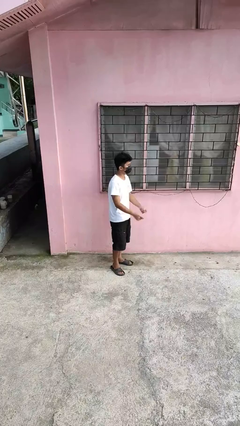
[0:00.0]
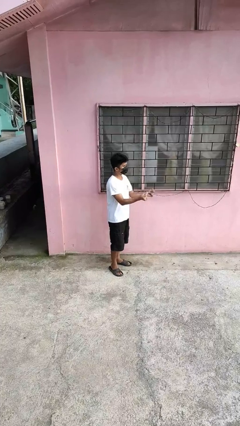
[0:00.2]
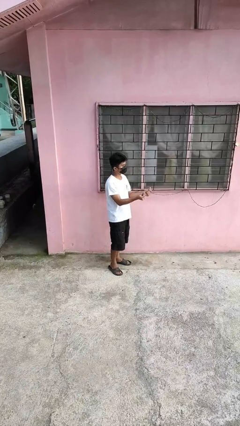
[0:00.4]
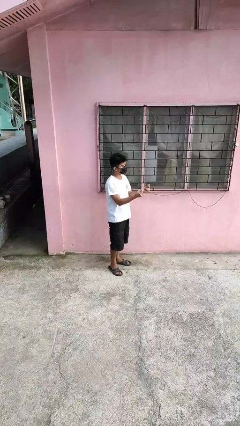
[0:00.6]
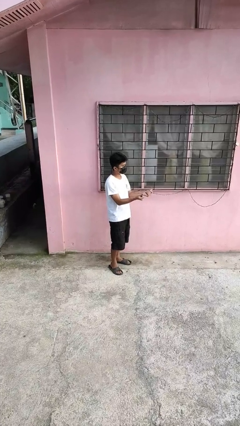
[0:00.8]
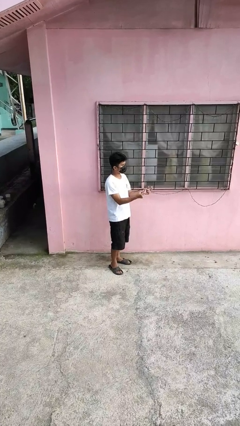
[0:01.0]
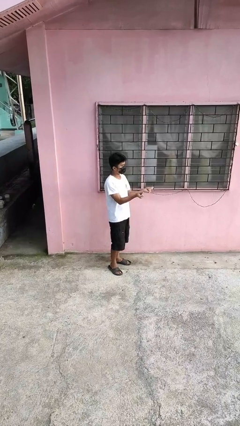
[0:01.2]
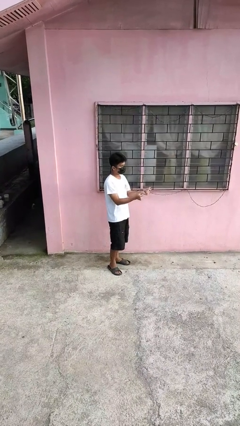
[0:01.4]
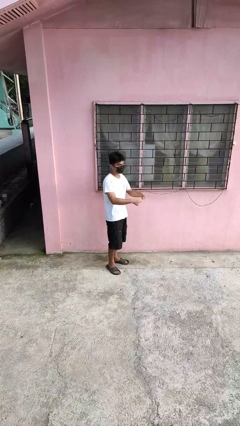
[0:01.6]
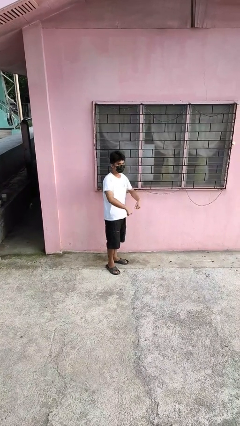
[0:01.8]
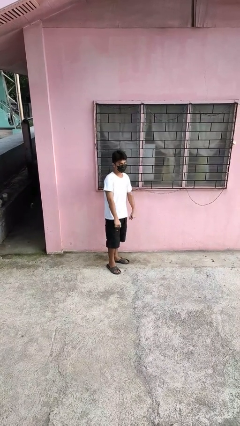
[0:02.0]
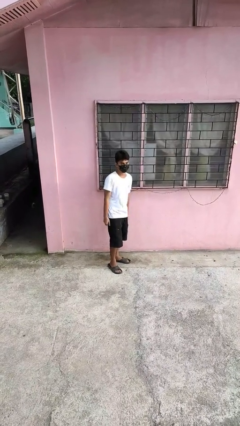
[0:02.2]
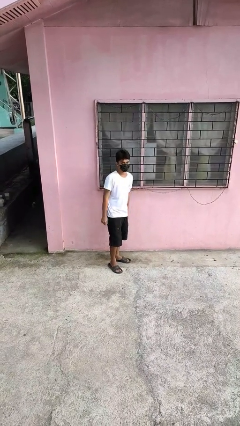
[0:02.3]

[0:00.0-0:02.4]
person snaps fingers

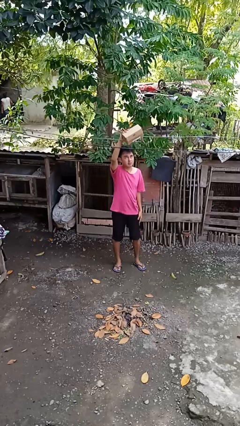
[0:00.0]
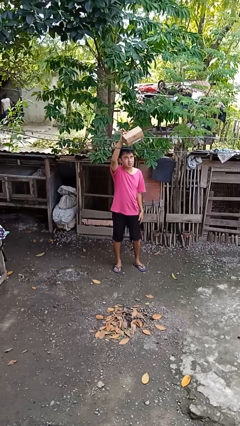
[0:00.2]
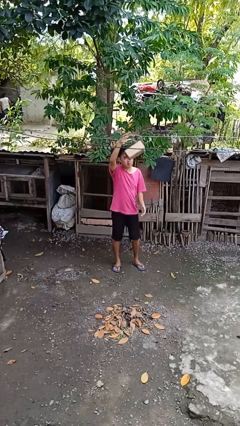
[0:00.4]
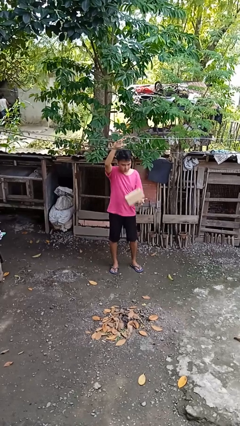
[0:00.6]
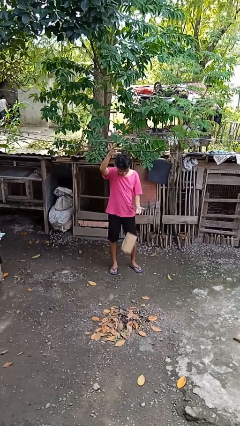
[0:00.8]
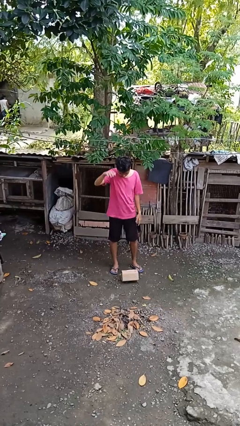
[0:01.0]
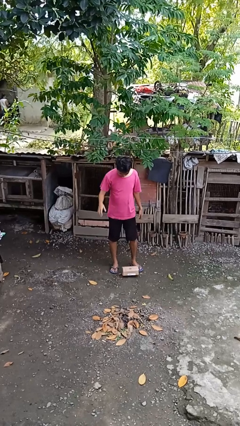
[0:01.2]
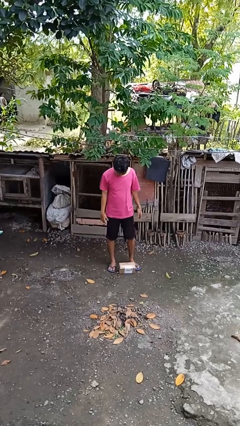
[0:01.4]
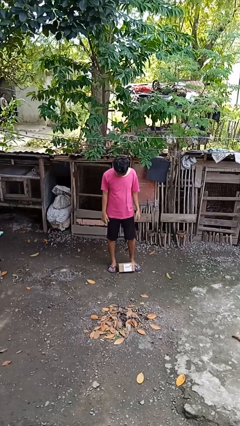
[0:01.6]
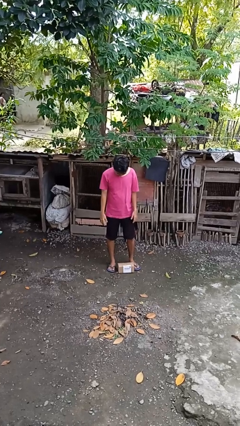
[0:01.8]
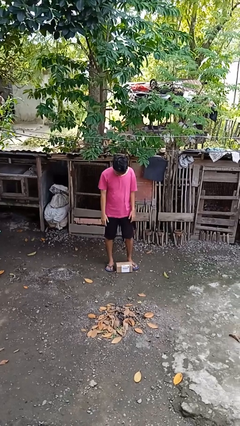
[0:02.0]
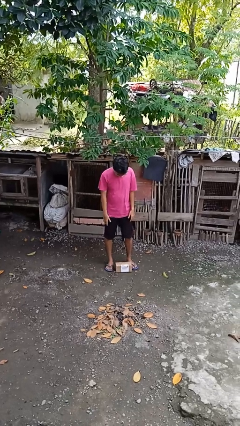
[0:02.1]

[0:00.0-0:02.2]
person drops object

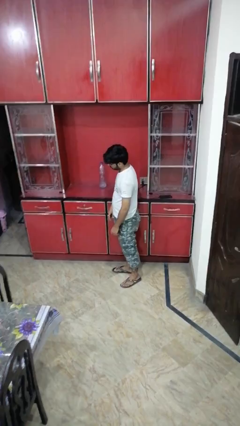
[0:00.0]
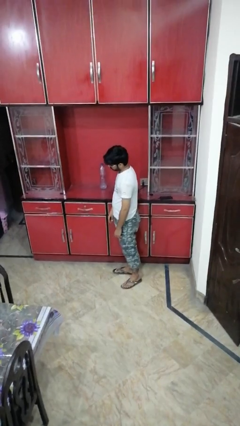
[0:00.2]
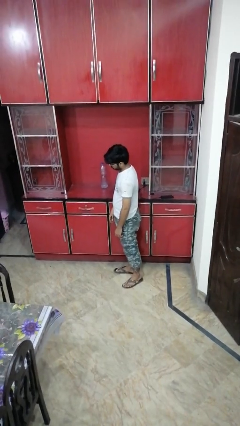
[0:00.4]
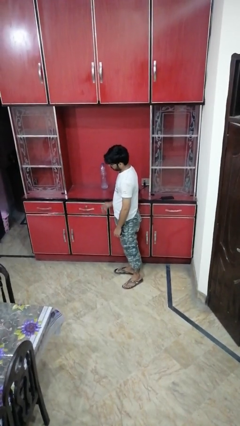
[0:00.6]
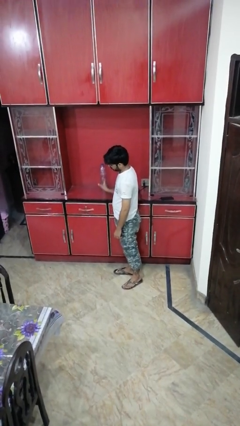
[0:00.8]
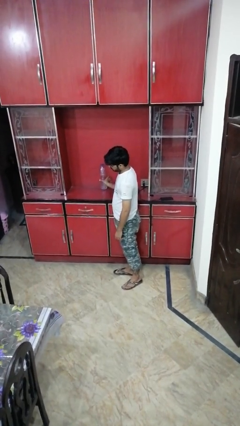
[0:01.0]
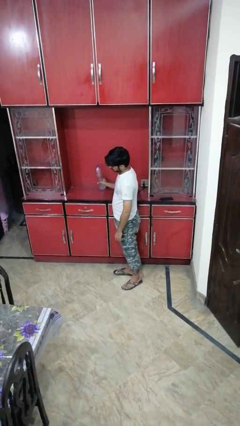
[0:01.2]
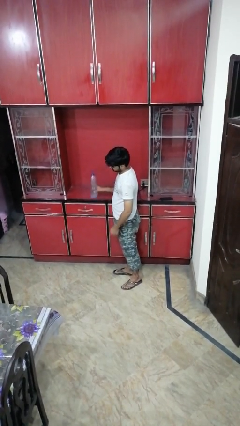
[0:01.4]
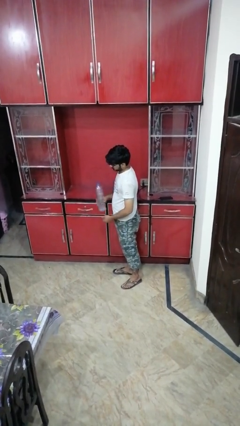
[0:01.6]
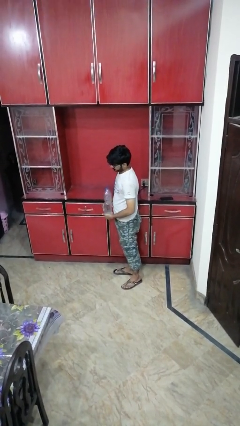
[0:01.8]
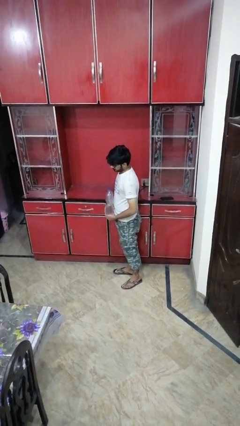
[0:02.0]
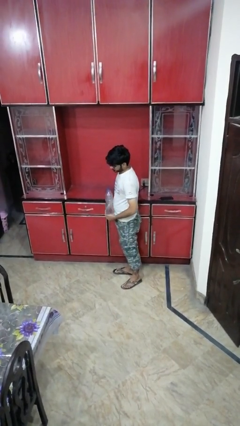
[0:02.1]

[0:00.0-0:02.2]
person picks up object from countertop

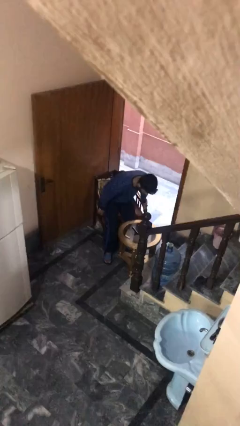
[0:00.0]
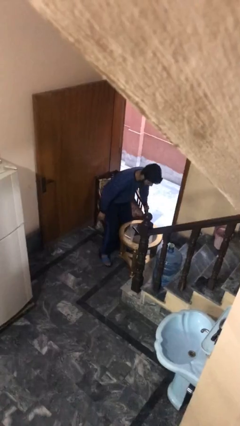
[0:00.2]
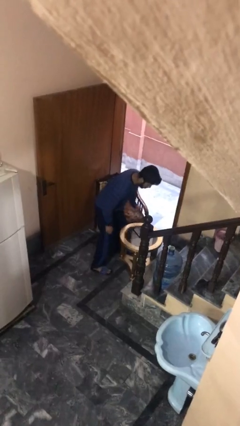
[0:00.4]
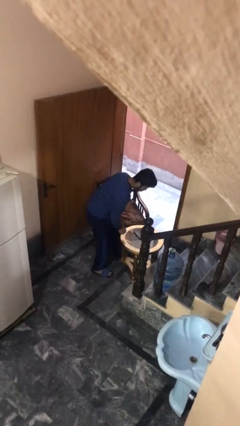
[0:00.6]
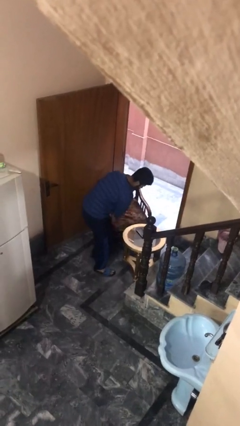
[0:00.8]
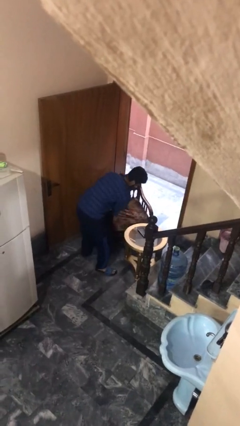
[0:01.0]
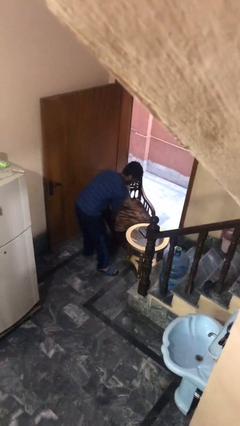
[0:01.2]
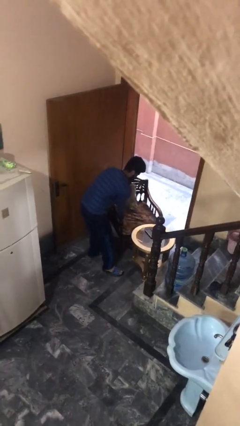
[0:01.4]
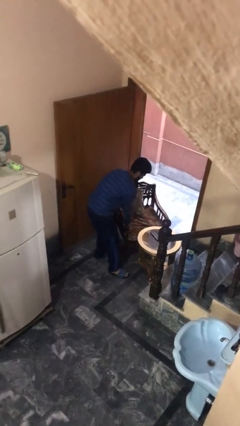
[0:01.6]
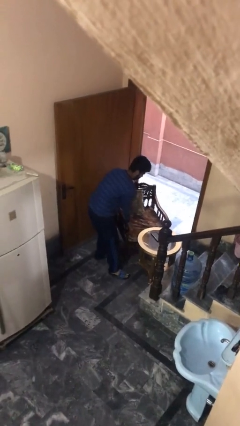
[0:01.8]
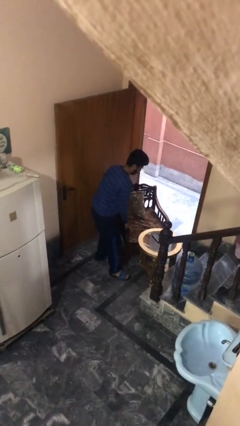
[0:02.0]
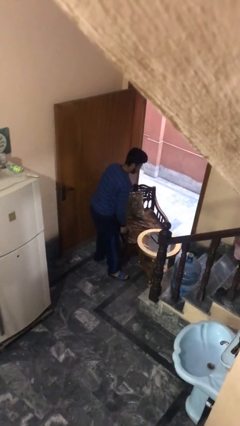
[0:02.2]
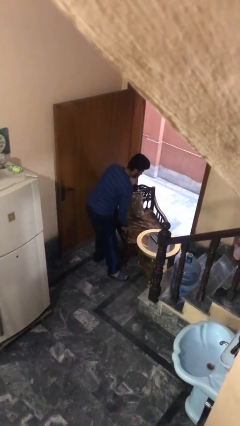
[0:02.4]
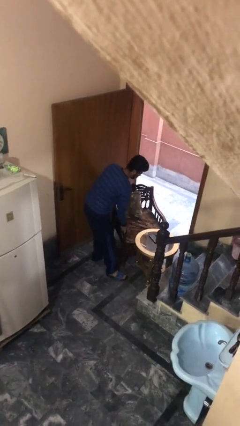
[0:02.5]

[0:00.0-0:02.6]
person stands up

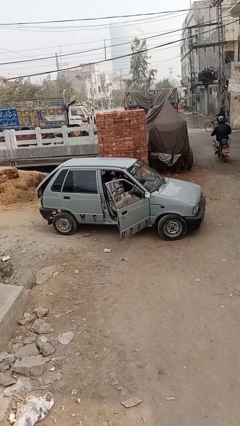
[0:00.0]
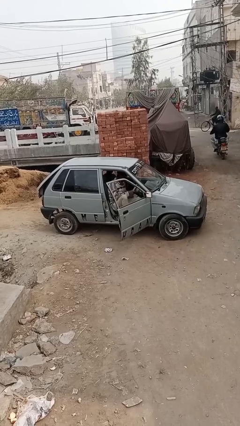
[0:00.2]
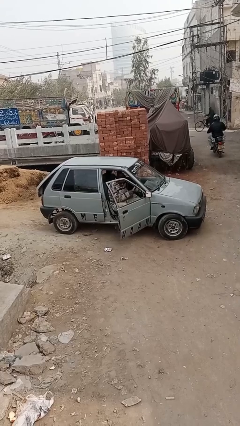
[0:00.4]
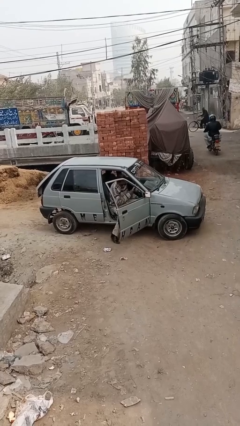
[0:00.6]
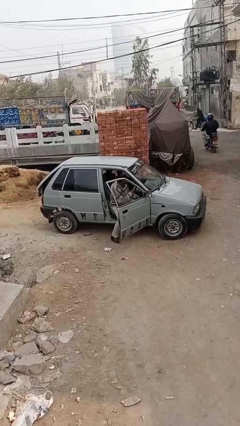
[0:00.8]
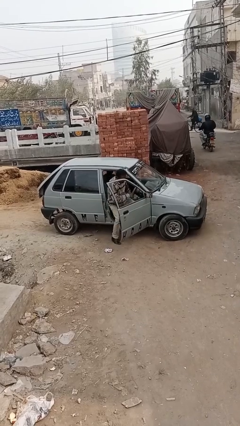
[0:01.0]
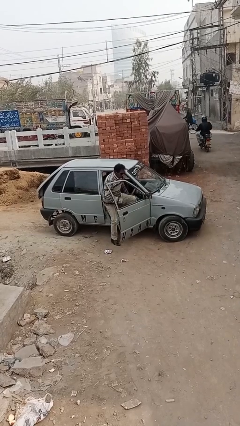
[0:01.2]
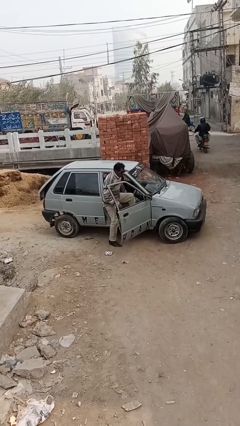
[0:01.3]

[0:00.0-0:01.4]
person exits car

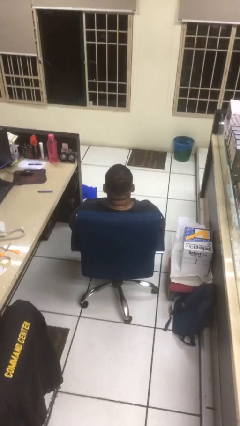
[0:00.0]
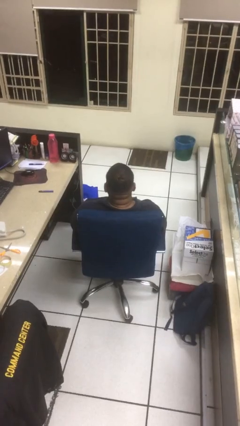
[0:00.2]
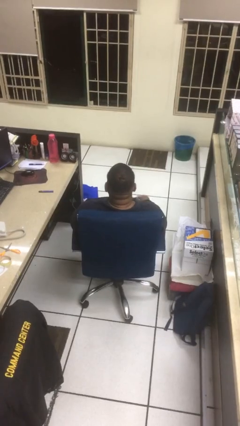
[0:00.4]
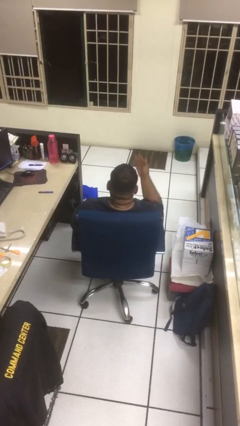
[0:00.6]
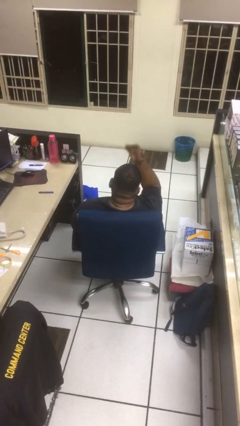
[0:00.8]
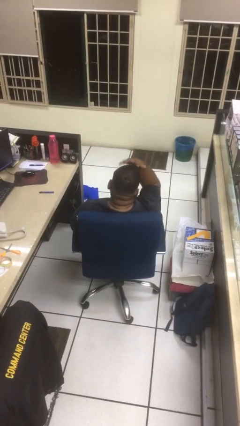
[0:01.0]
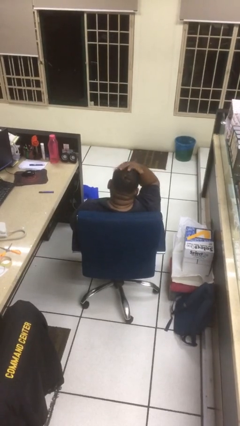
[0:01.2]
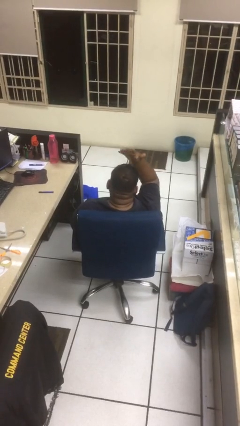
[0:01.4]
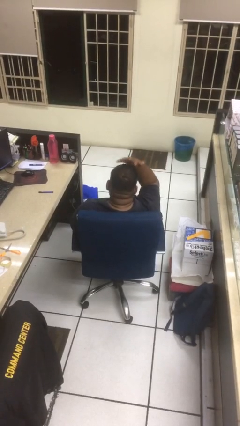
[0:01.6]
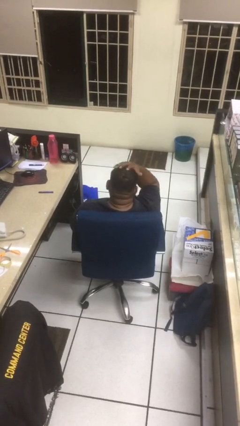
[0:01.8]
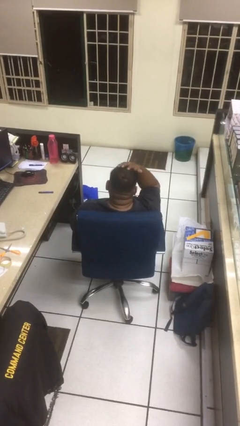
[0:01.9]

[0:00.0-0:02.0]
person pats head

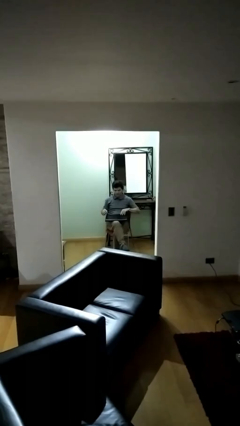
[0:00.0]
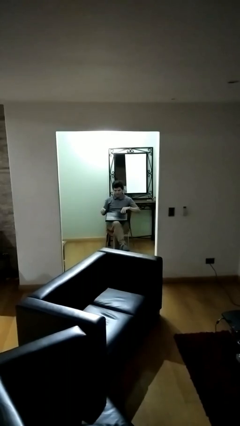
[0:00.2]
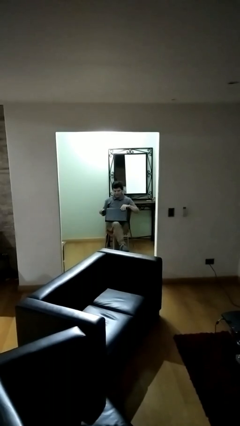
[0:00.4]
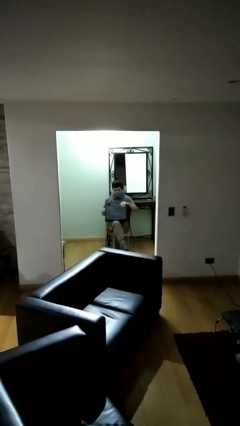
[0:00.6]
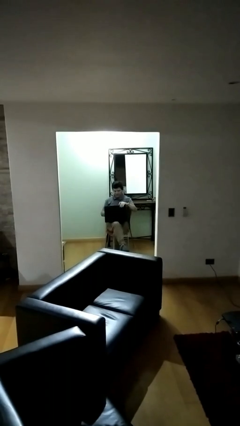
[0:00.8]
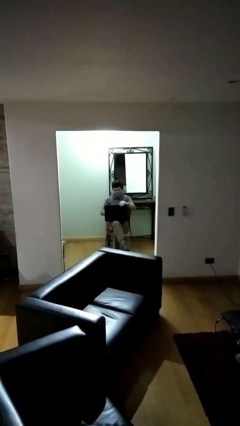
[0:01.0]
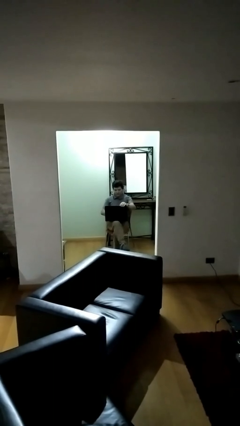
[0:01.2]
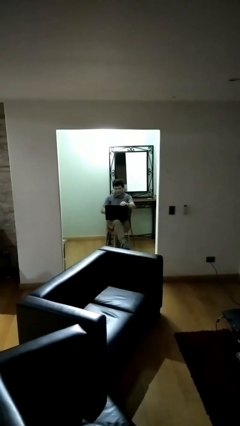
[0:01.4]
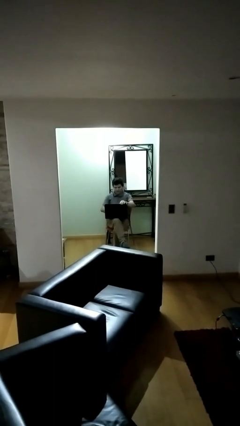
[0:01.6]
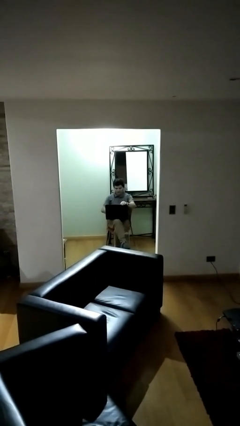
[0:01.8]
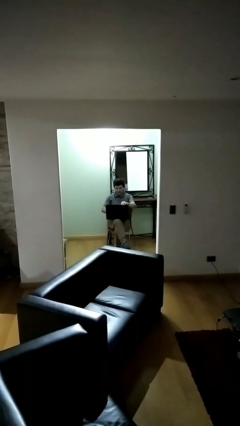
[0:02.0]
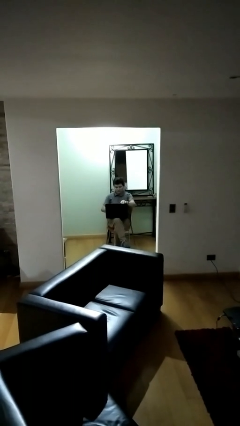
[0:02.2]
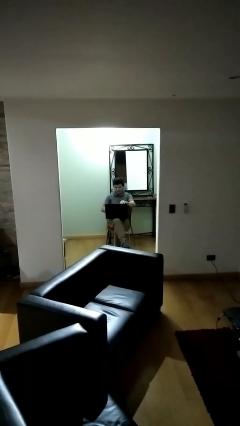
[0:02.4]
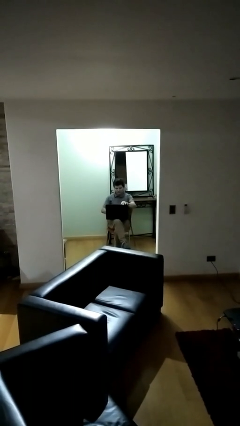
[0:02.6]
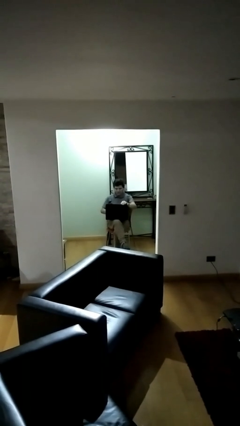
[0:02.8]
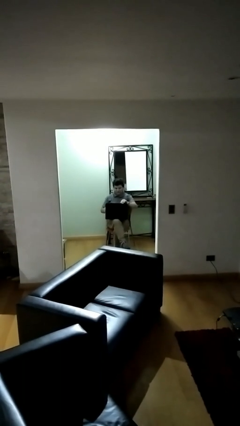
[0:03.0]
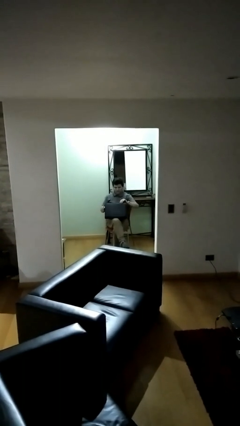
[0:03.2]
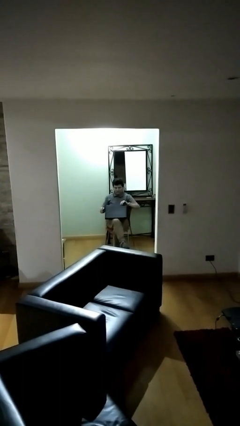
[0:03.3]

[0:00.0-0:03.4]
person interacts with laptop

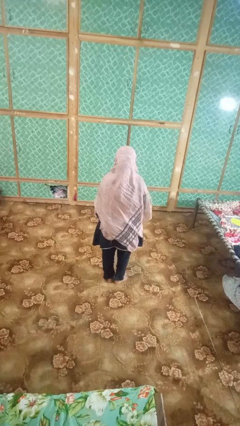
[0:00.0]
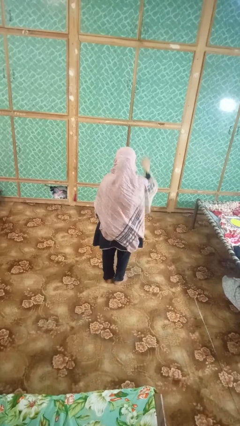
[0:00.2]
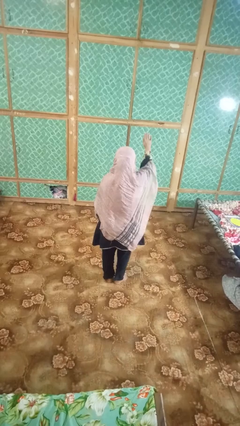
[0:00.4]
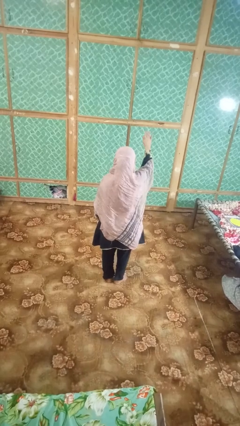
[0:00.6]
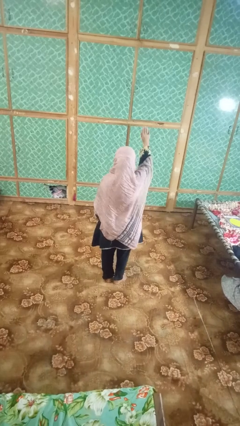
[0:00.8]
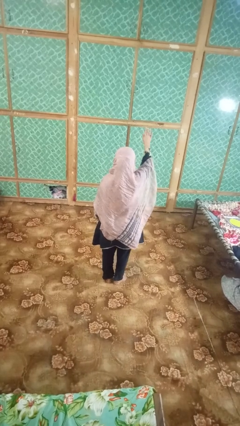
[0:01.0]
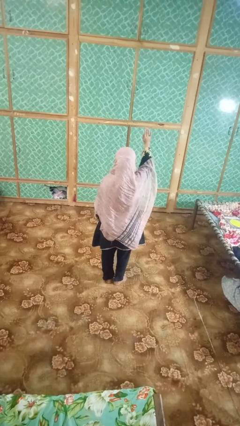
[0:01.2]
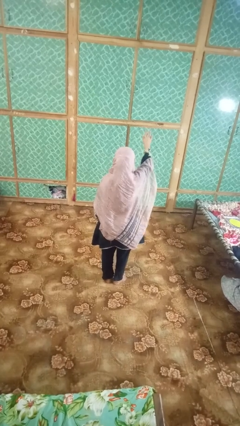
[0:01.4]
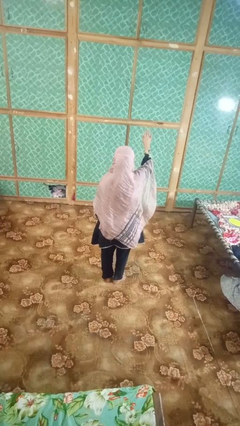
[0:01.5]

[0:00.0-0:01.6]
person gestures stop
